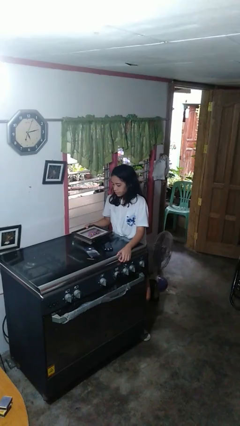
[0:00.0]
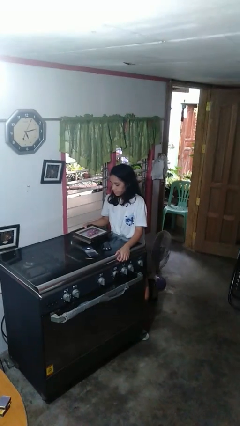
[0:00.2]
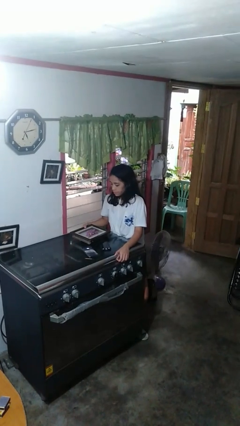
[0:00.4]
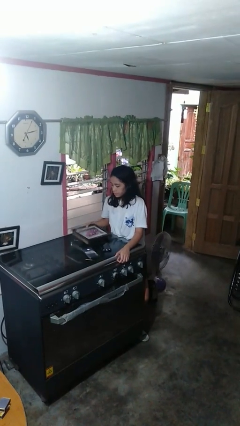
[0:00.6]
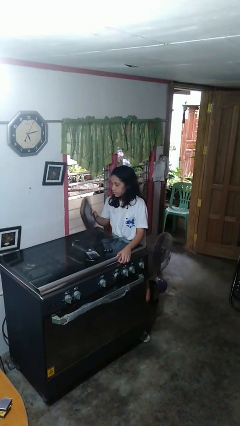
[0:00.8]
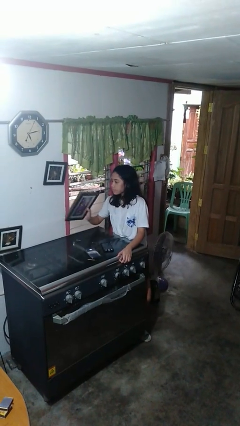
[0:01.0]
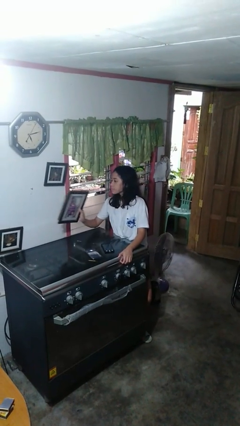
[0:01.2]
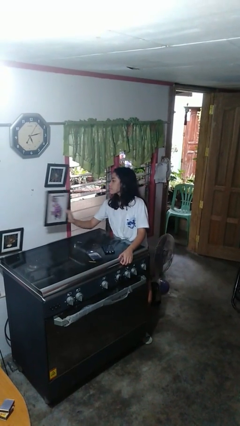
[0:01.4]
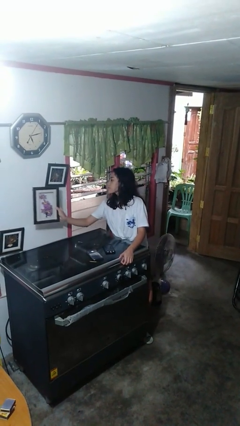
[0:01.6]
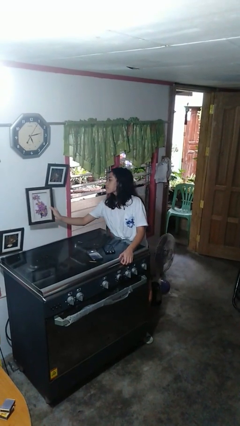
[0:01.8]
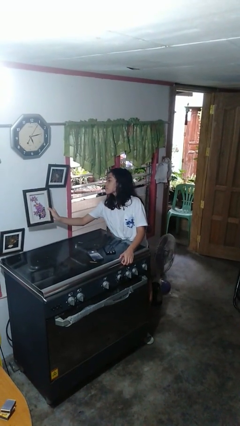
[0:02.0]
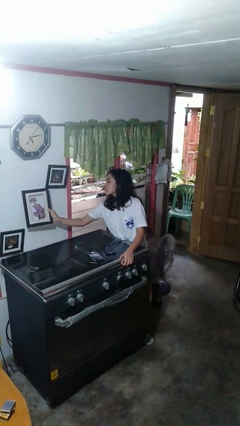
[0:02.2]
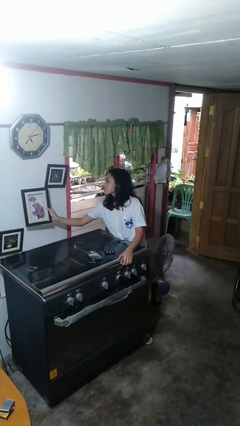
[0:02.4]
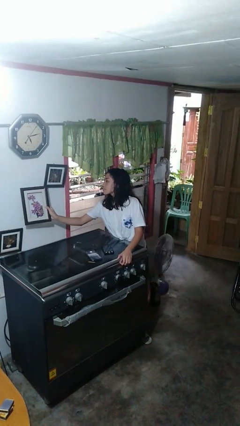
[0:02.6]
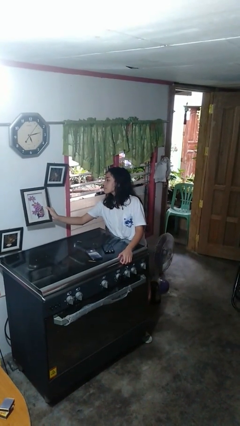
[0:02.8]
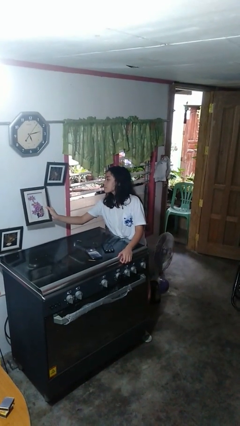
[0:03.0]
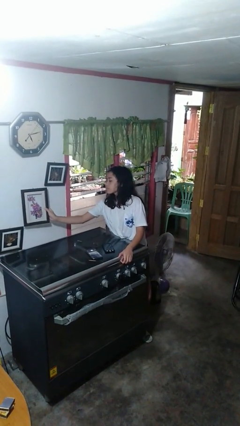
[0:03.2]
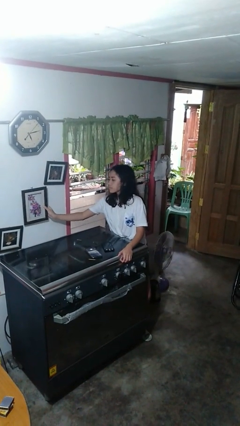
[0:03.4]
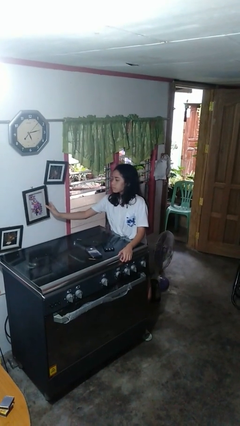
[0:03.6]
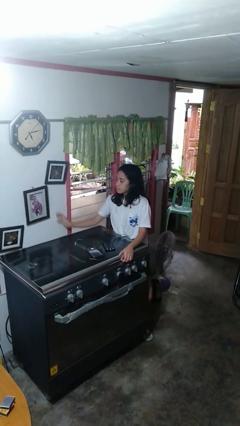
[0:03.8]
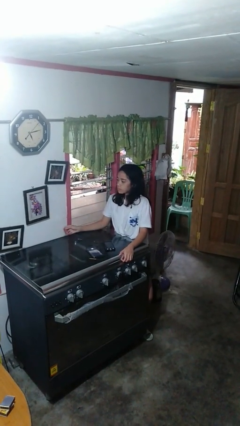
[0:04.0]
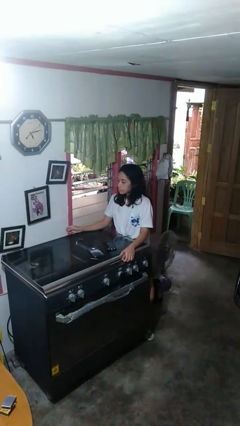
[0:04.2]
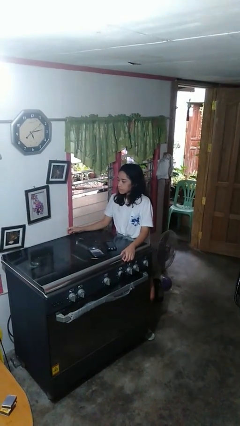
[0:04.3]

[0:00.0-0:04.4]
person puts up picture frame

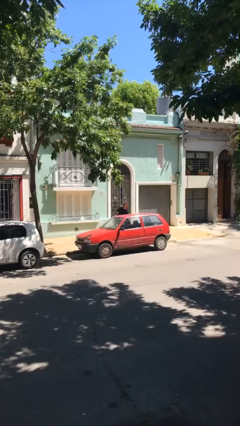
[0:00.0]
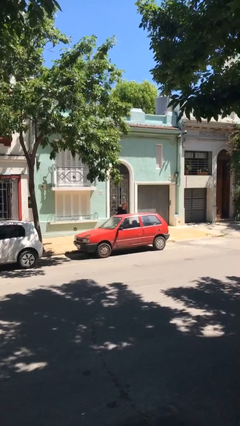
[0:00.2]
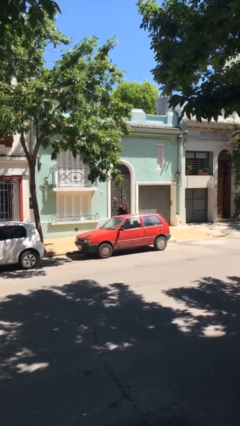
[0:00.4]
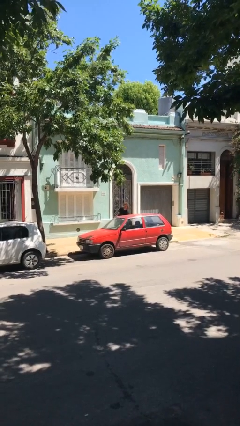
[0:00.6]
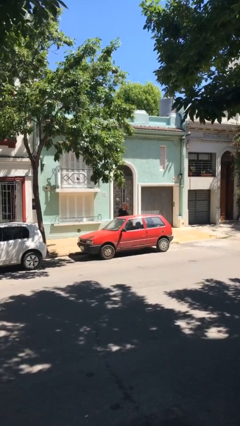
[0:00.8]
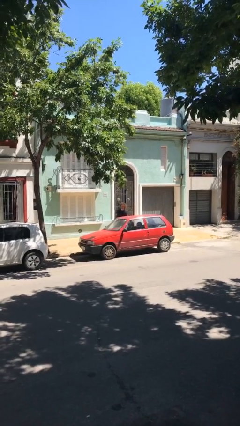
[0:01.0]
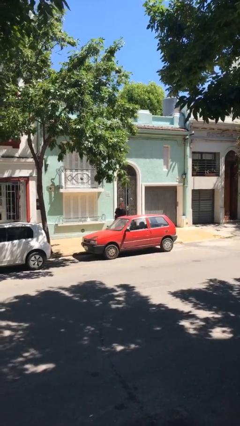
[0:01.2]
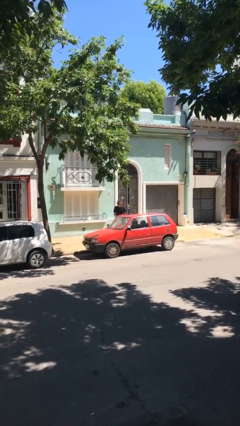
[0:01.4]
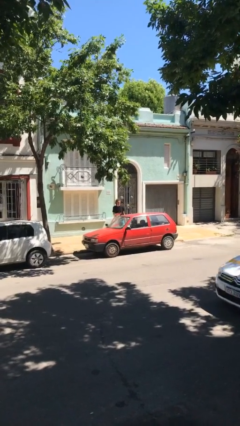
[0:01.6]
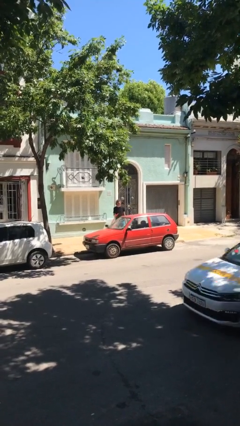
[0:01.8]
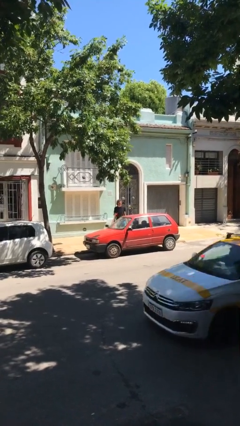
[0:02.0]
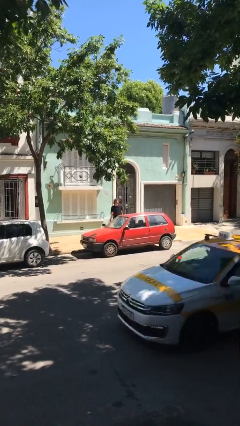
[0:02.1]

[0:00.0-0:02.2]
person opens car door

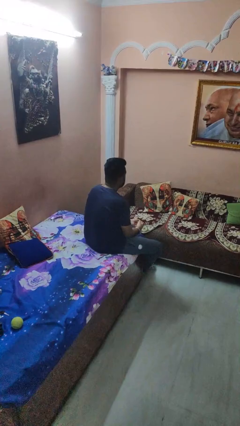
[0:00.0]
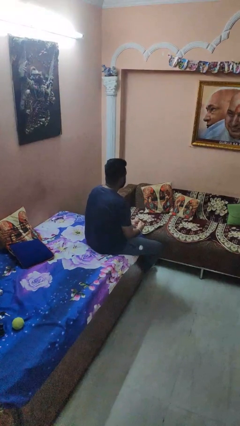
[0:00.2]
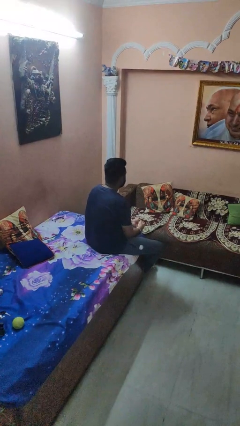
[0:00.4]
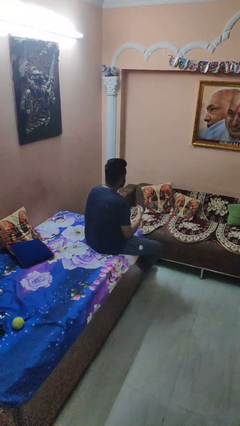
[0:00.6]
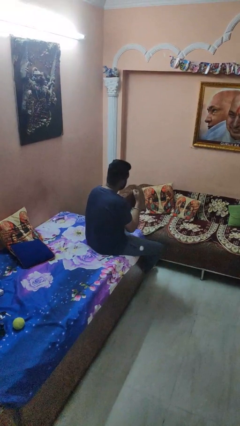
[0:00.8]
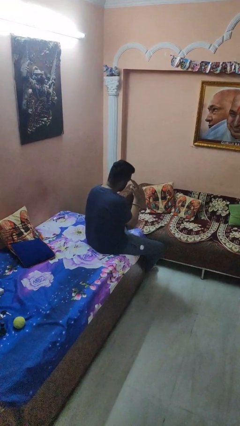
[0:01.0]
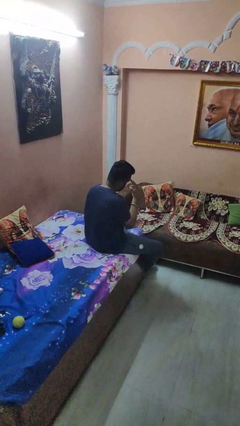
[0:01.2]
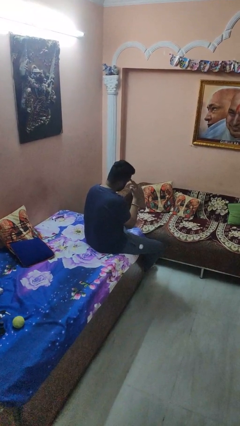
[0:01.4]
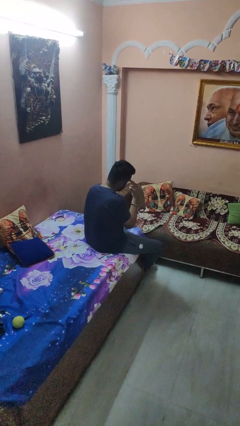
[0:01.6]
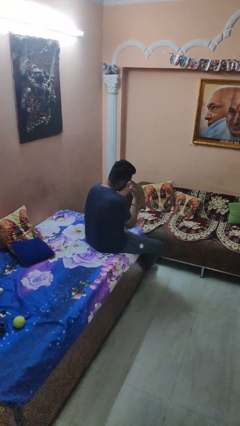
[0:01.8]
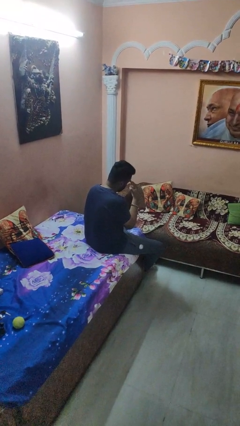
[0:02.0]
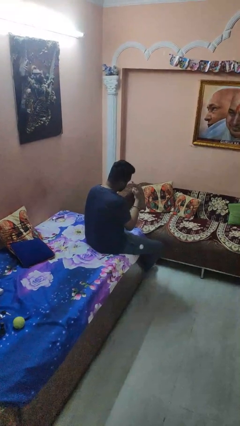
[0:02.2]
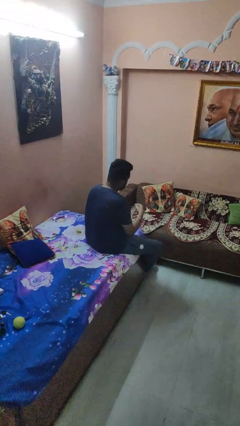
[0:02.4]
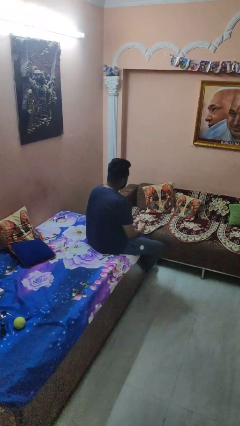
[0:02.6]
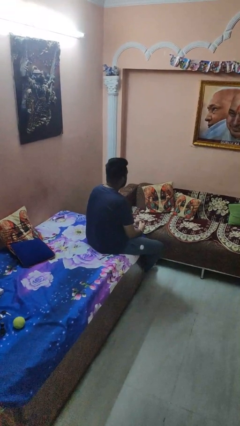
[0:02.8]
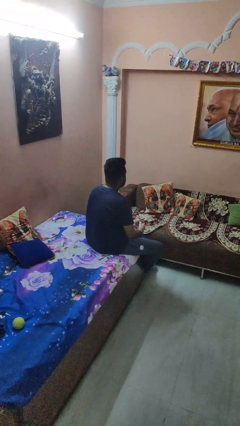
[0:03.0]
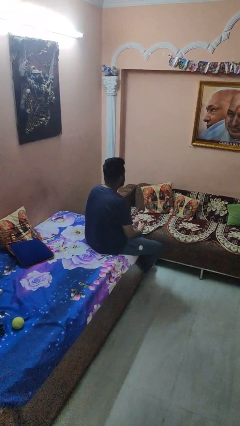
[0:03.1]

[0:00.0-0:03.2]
person gestures watch closely

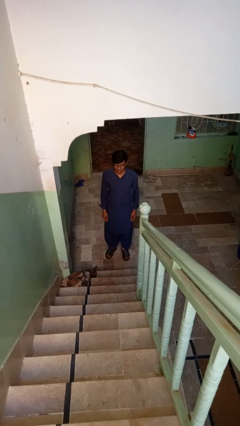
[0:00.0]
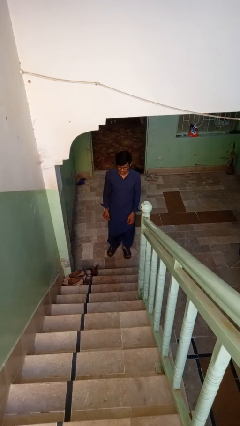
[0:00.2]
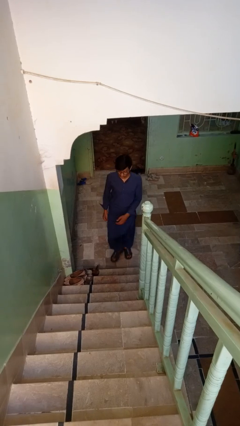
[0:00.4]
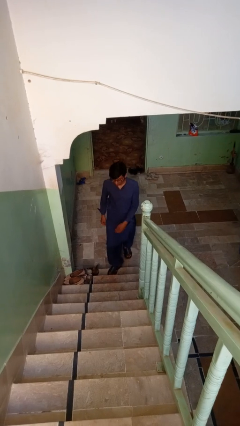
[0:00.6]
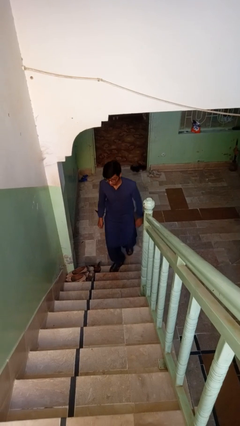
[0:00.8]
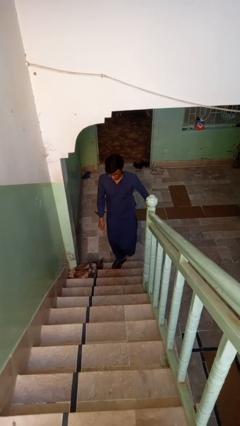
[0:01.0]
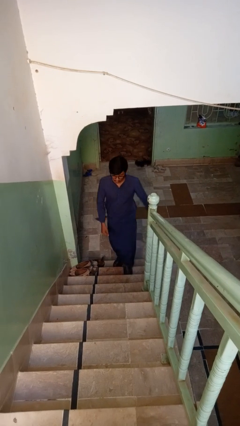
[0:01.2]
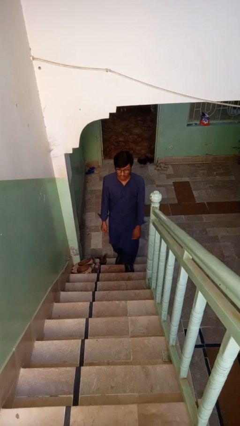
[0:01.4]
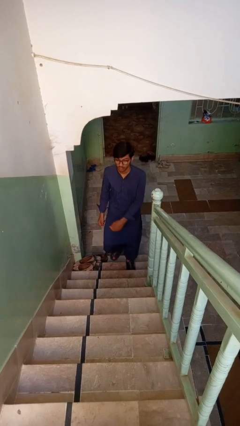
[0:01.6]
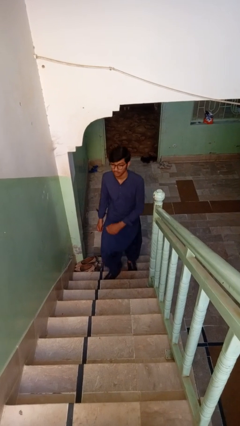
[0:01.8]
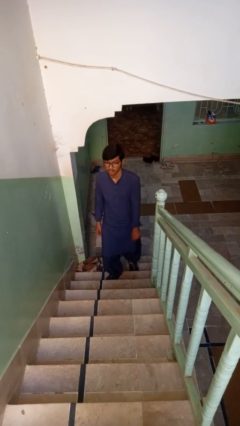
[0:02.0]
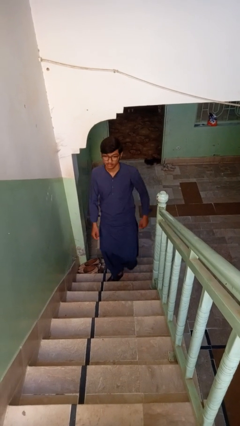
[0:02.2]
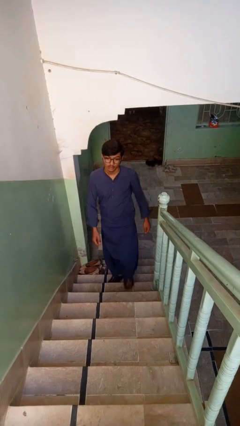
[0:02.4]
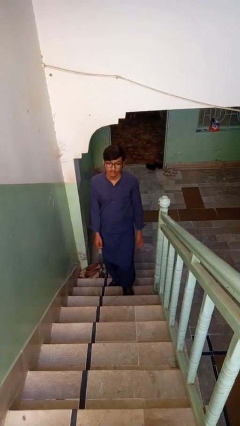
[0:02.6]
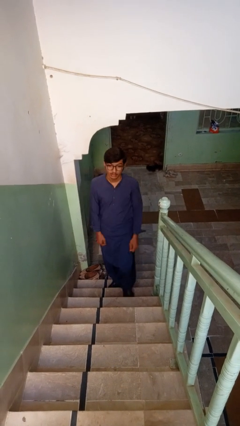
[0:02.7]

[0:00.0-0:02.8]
person climbs up stairs

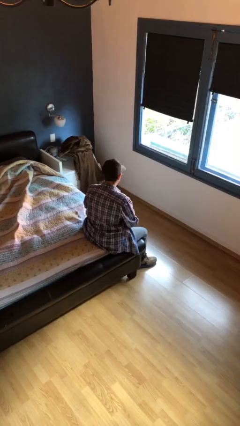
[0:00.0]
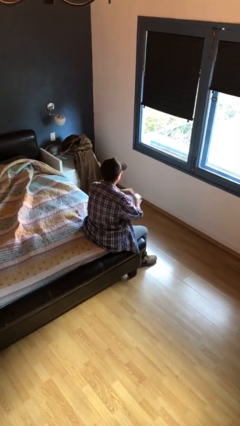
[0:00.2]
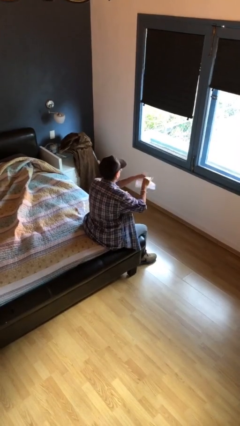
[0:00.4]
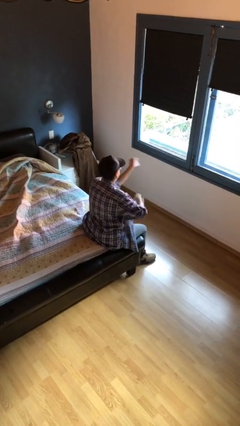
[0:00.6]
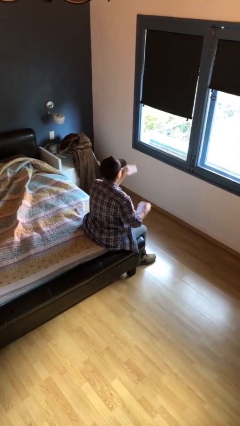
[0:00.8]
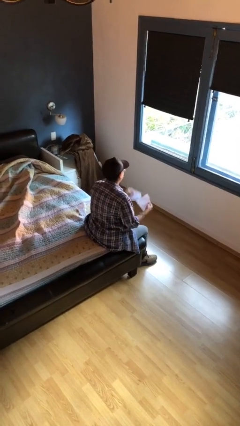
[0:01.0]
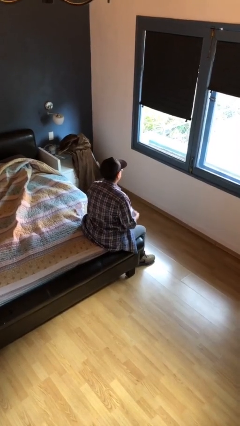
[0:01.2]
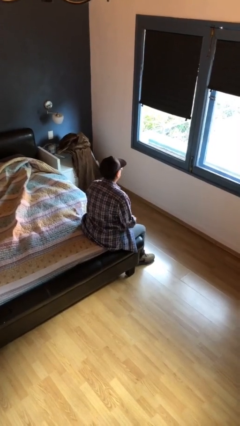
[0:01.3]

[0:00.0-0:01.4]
person tears paper

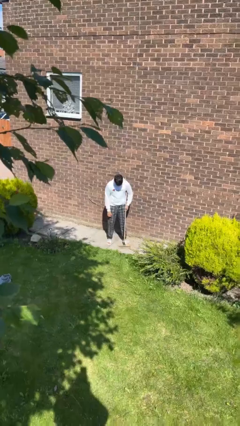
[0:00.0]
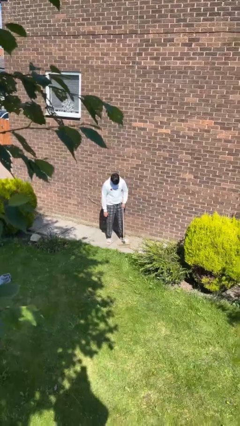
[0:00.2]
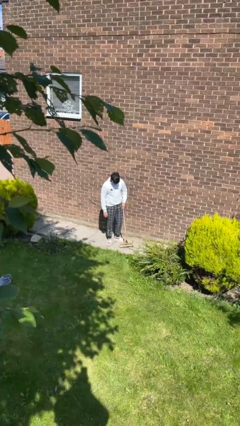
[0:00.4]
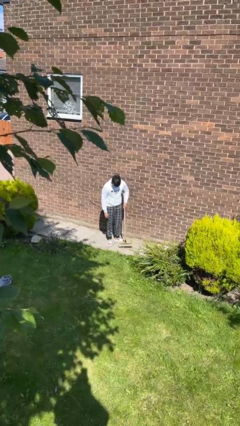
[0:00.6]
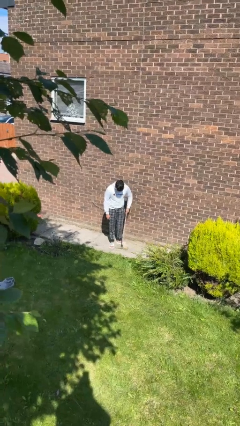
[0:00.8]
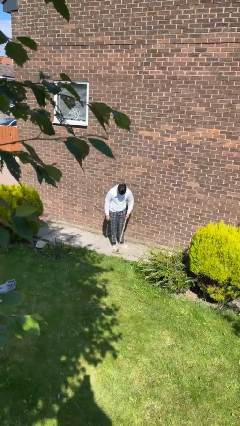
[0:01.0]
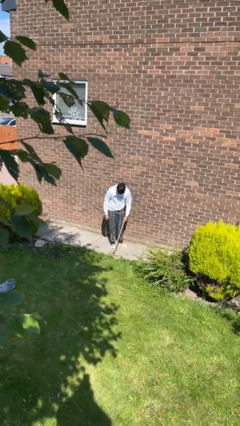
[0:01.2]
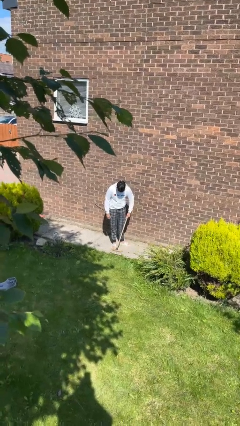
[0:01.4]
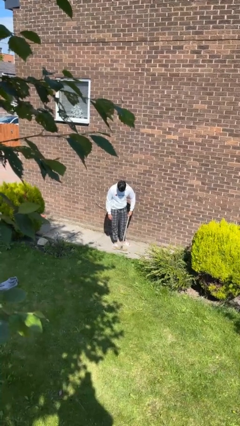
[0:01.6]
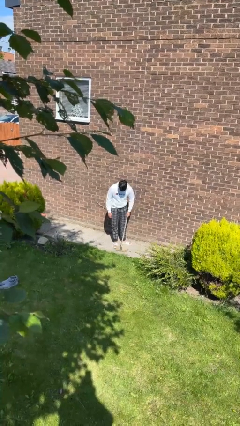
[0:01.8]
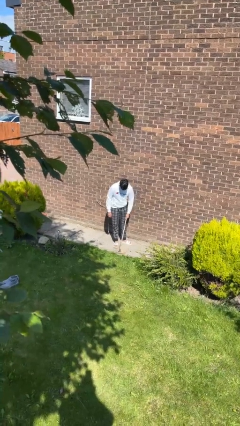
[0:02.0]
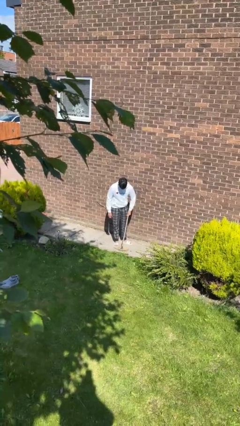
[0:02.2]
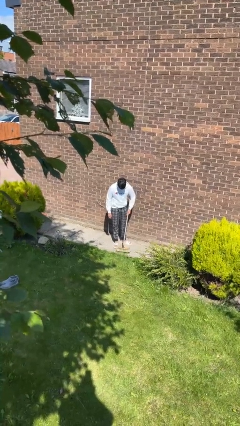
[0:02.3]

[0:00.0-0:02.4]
person sweeps floor

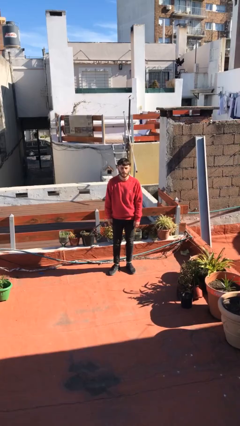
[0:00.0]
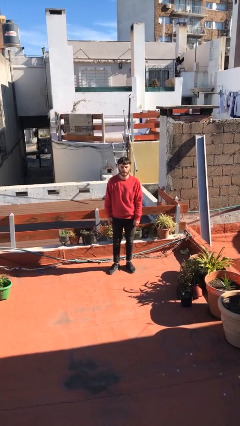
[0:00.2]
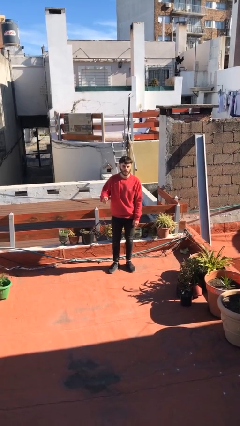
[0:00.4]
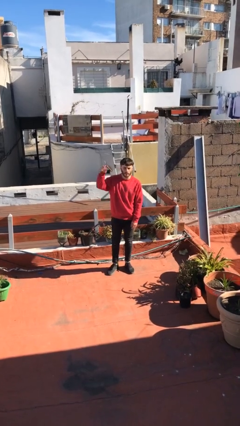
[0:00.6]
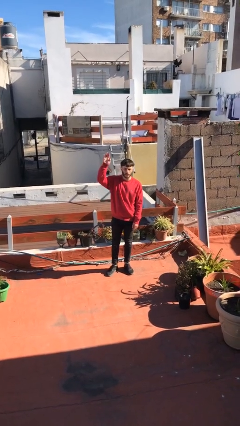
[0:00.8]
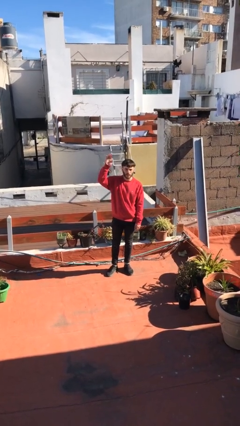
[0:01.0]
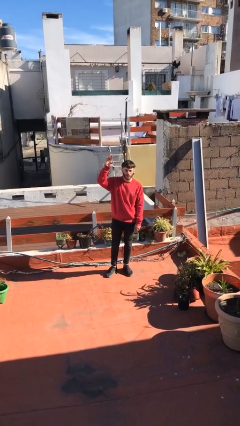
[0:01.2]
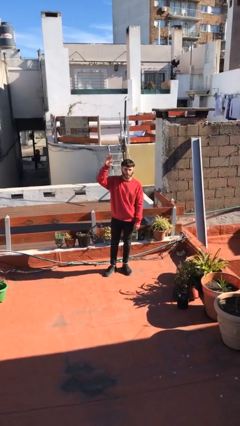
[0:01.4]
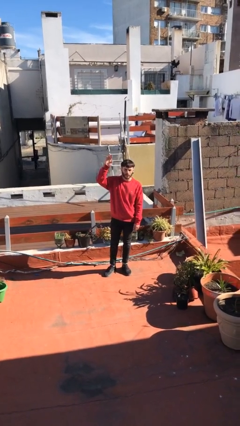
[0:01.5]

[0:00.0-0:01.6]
person gestures raise hand
